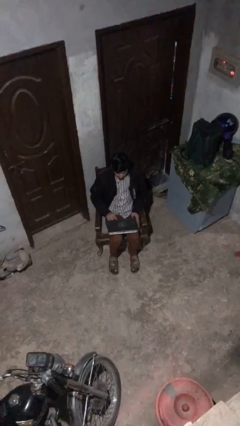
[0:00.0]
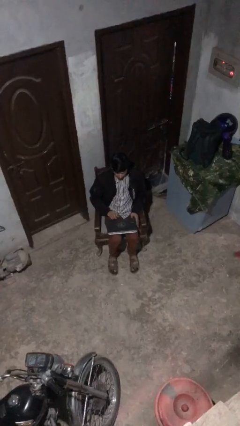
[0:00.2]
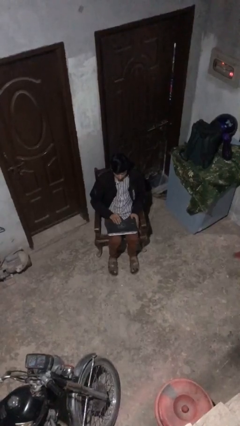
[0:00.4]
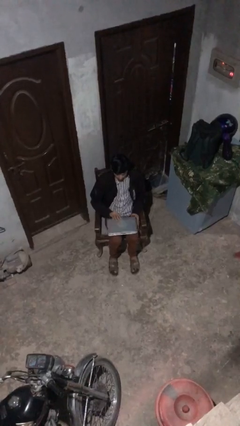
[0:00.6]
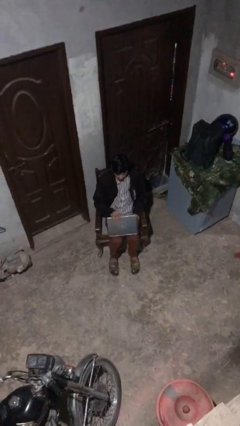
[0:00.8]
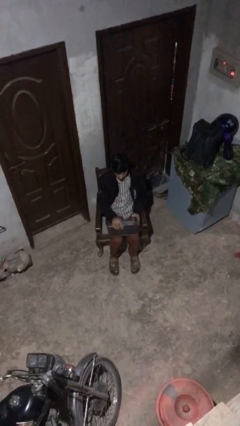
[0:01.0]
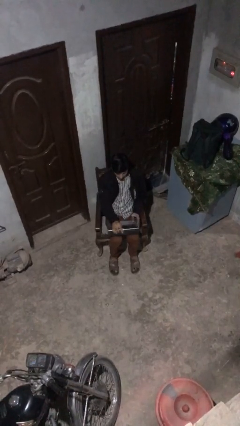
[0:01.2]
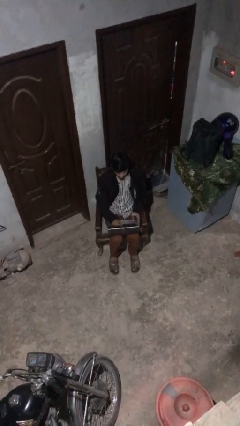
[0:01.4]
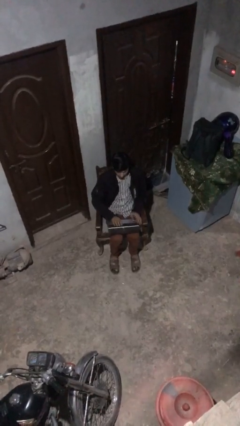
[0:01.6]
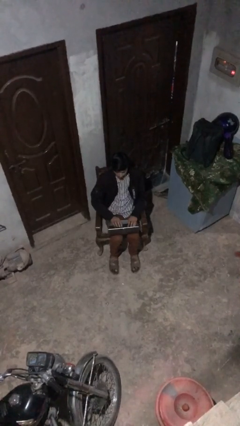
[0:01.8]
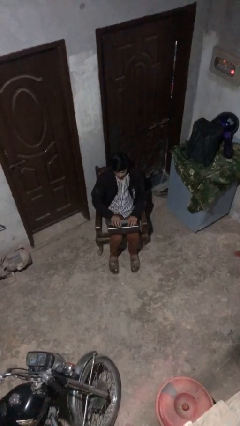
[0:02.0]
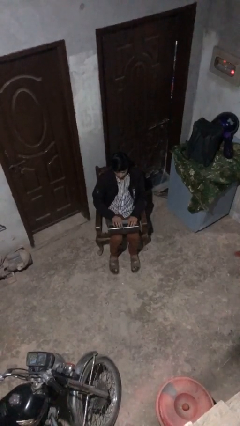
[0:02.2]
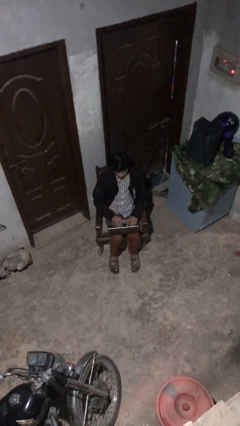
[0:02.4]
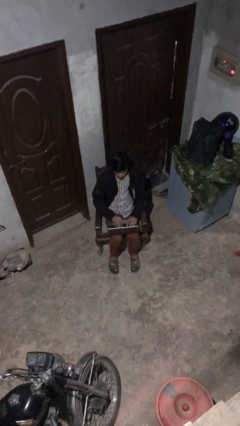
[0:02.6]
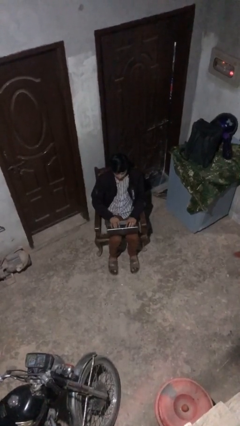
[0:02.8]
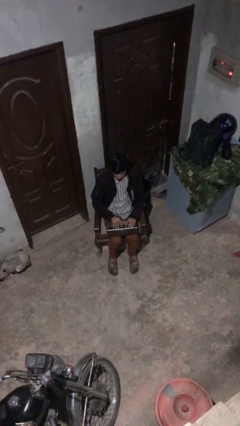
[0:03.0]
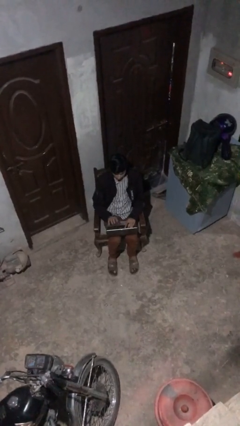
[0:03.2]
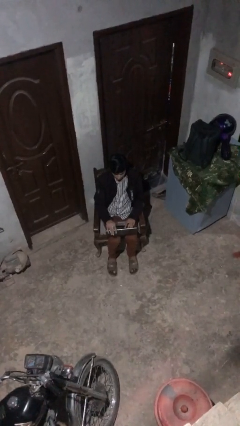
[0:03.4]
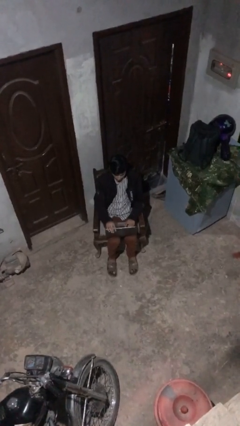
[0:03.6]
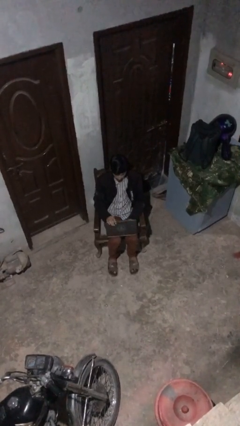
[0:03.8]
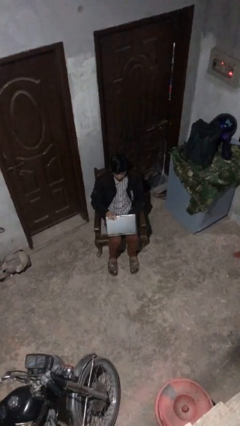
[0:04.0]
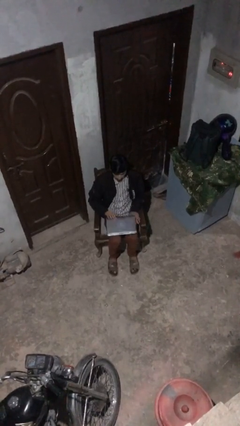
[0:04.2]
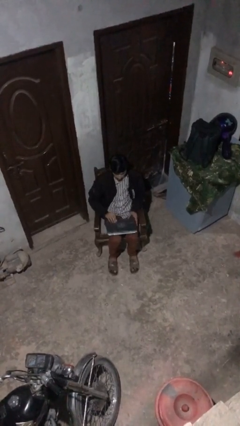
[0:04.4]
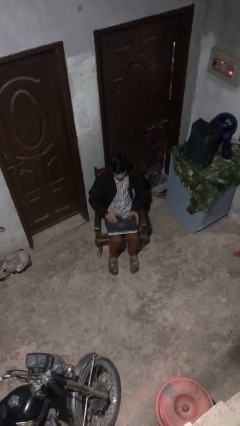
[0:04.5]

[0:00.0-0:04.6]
person interacts with laptop

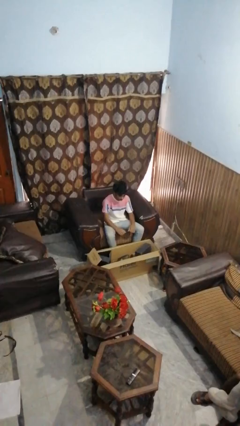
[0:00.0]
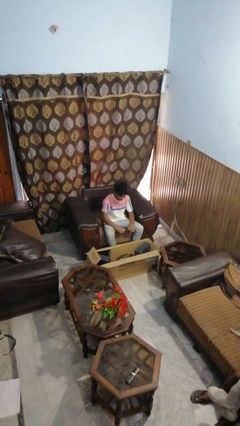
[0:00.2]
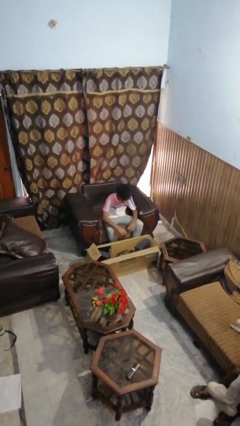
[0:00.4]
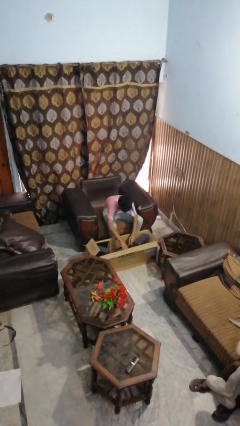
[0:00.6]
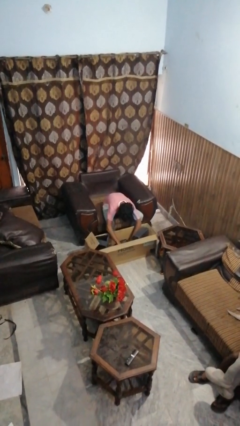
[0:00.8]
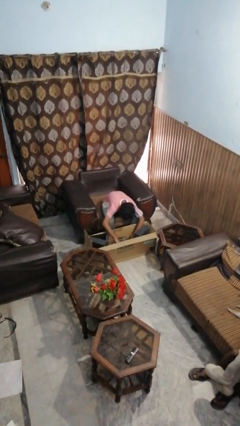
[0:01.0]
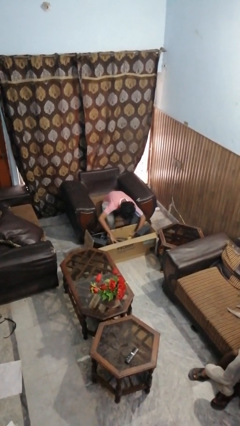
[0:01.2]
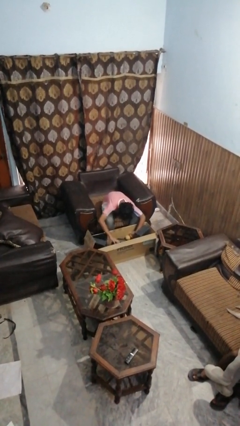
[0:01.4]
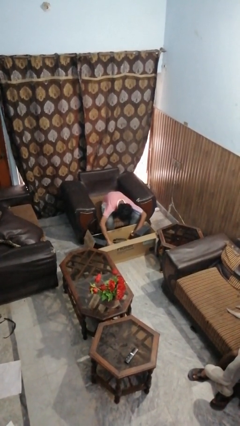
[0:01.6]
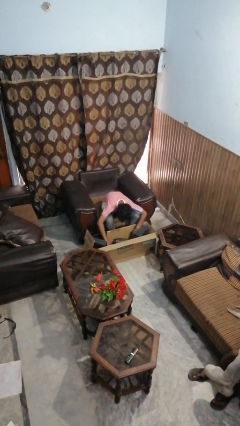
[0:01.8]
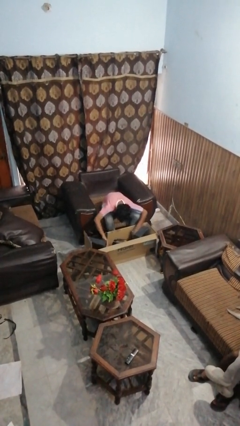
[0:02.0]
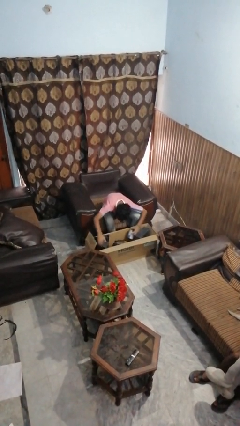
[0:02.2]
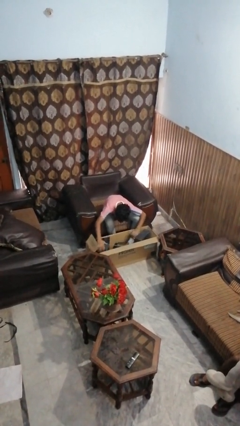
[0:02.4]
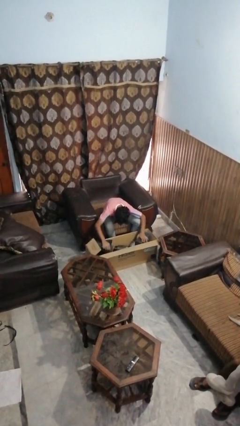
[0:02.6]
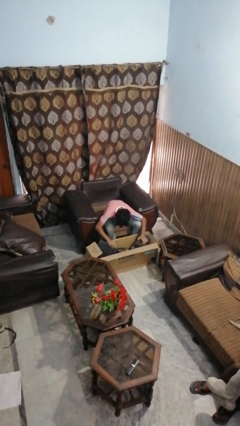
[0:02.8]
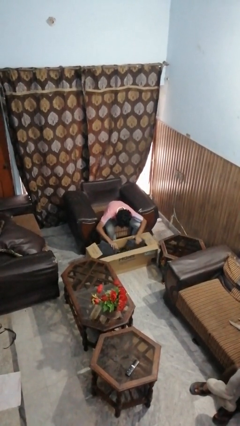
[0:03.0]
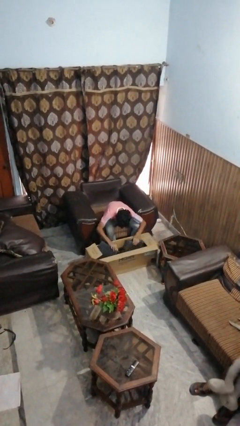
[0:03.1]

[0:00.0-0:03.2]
person searches in box

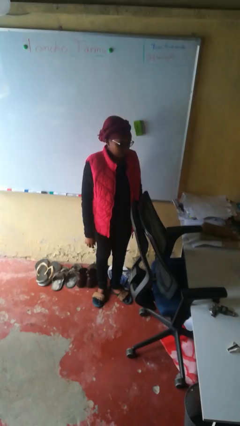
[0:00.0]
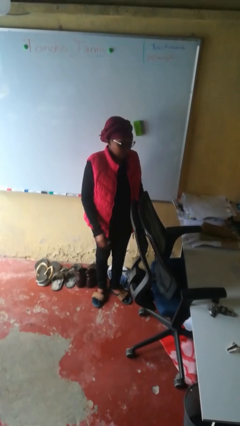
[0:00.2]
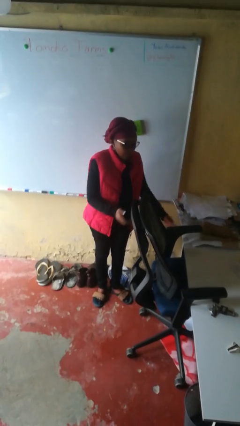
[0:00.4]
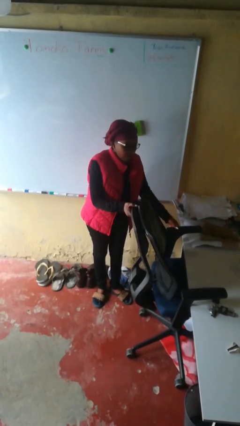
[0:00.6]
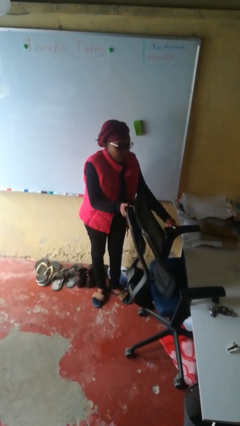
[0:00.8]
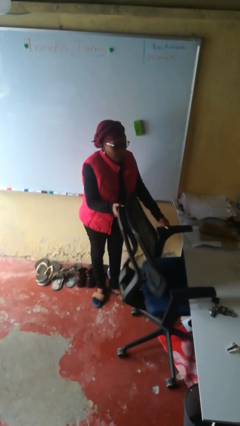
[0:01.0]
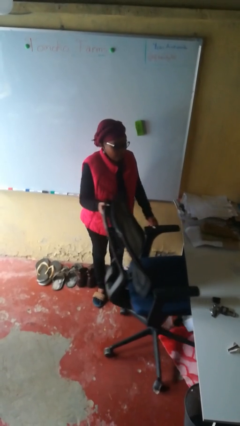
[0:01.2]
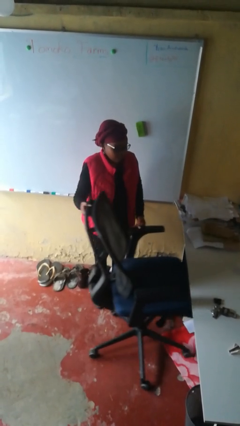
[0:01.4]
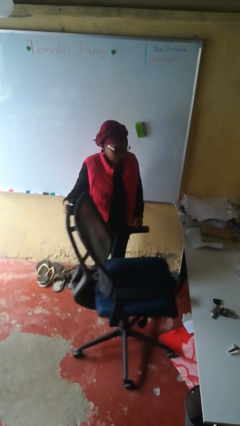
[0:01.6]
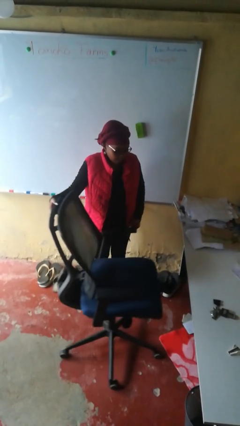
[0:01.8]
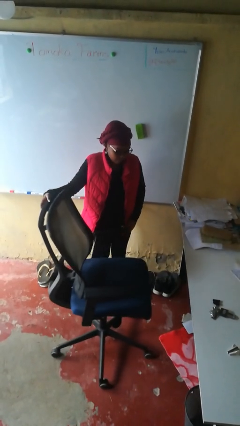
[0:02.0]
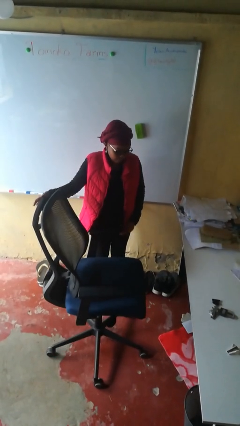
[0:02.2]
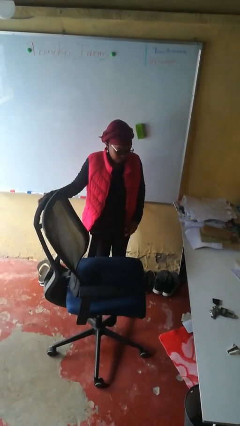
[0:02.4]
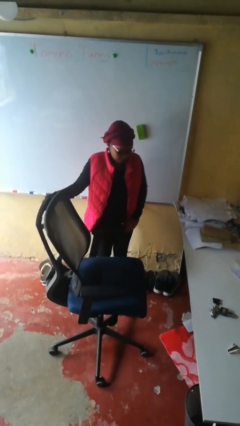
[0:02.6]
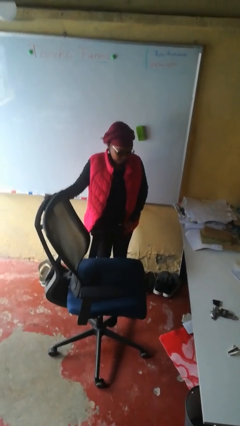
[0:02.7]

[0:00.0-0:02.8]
person pulls out chair

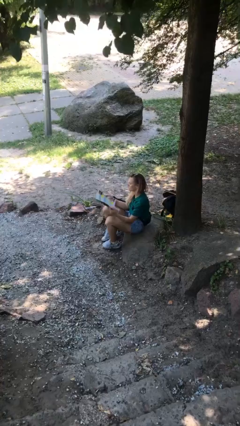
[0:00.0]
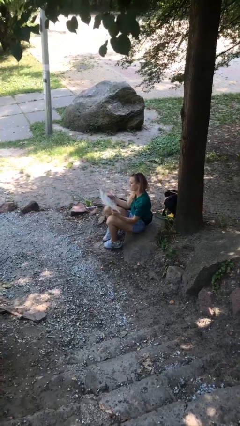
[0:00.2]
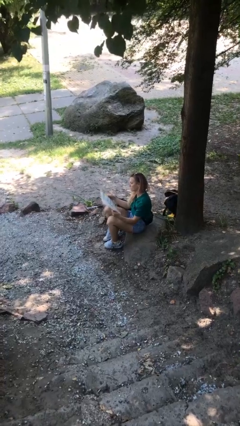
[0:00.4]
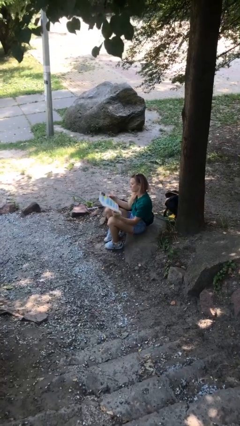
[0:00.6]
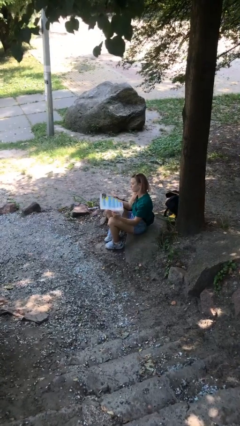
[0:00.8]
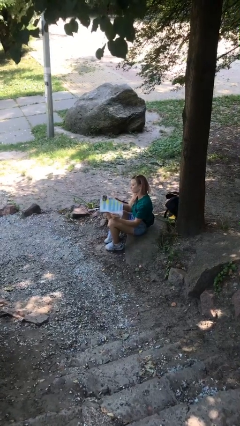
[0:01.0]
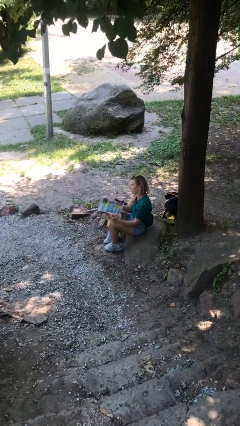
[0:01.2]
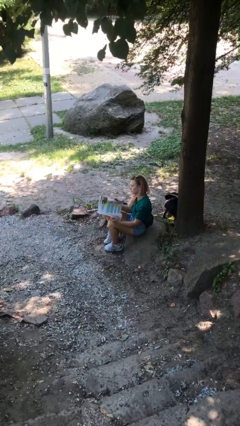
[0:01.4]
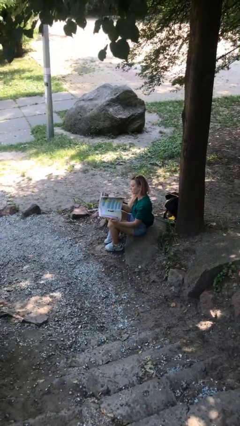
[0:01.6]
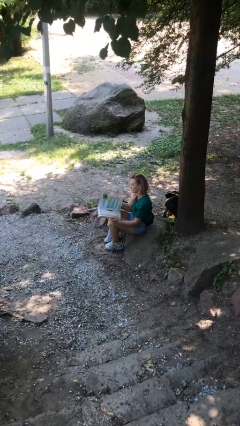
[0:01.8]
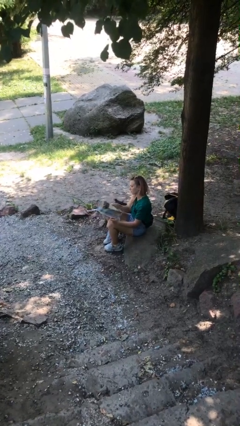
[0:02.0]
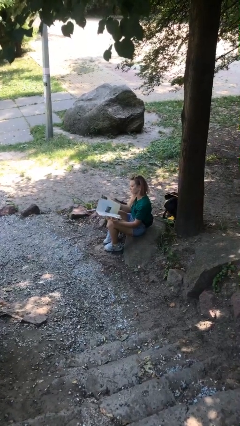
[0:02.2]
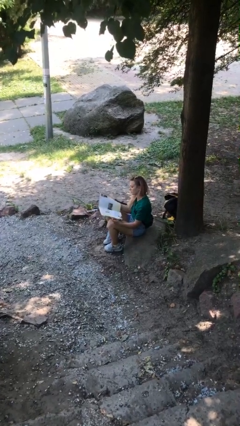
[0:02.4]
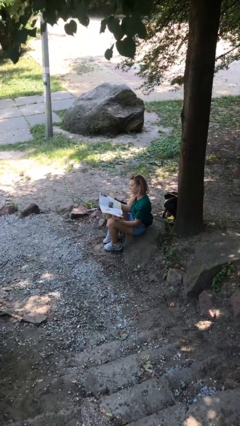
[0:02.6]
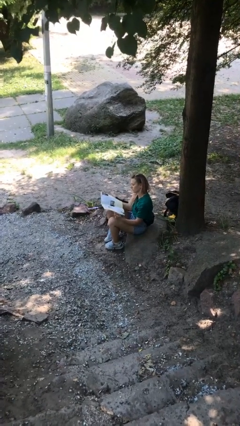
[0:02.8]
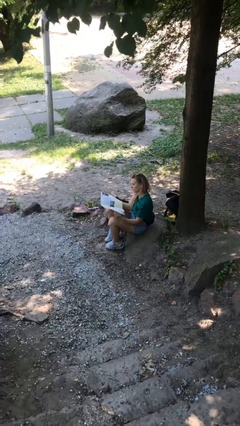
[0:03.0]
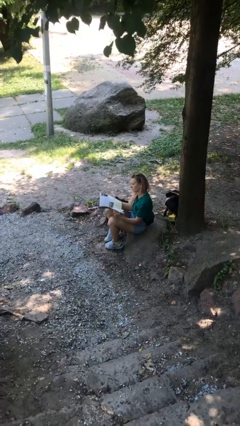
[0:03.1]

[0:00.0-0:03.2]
person reads magazine

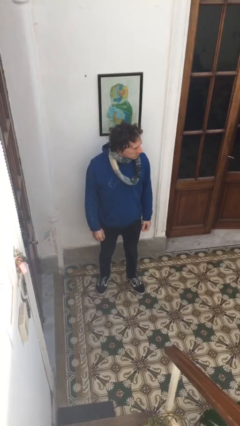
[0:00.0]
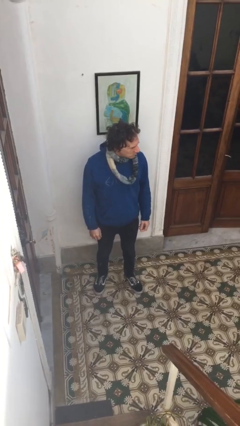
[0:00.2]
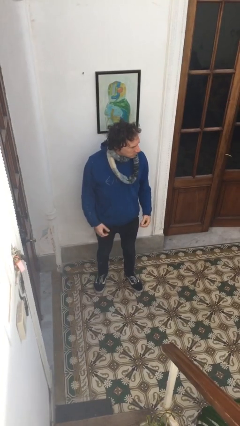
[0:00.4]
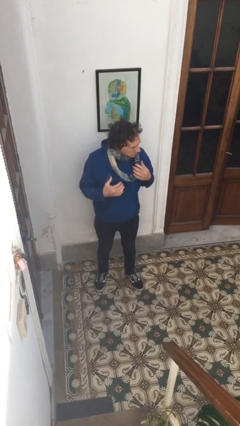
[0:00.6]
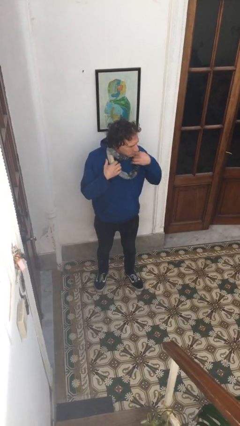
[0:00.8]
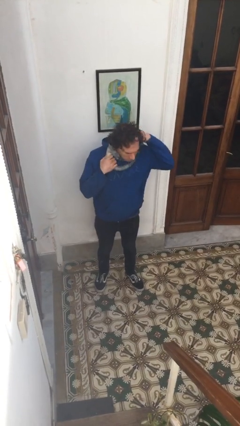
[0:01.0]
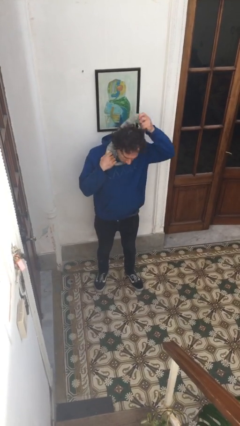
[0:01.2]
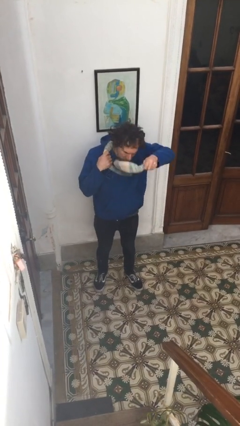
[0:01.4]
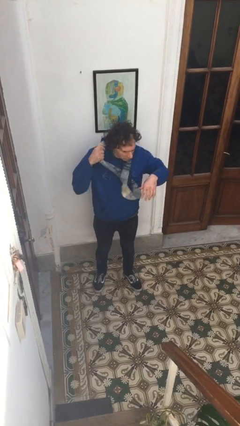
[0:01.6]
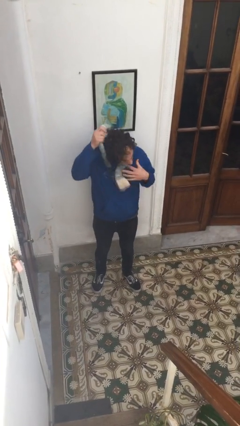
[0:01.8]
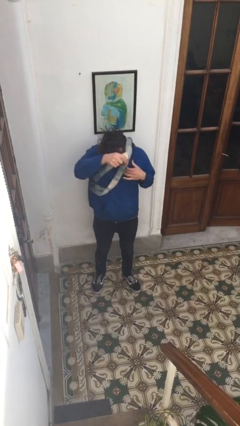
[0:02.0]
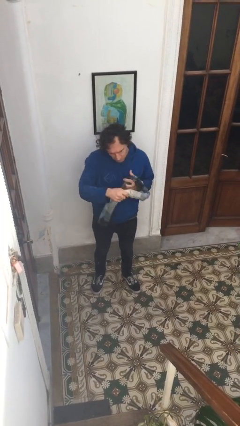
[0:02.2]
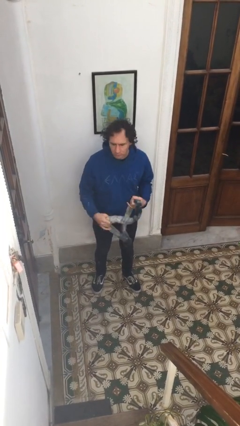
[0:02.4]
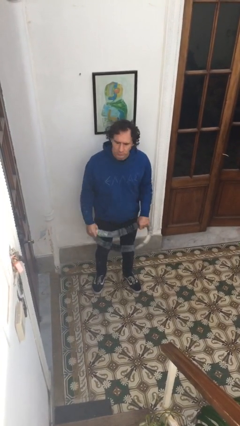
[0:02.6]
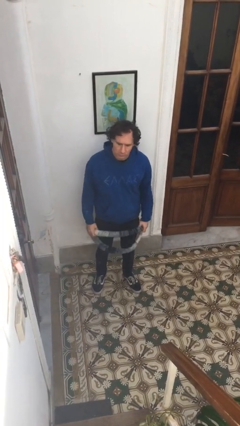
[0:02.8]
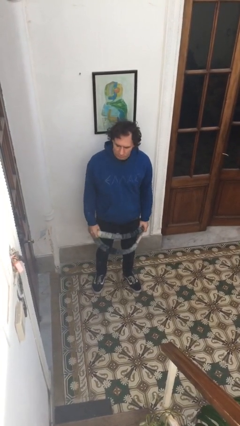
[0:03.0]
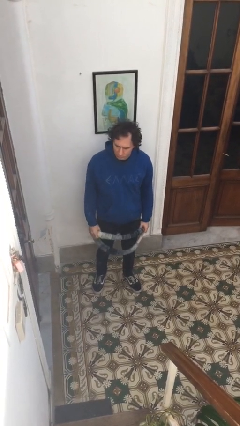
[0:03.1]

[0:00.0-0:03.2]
person takes off scarf

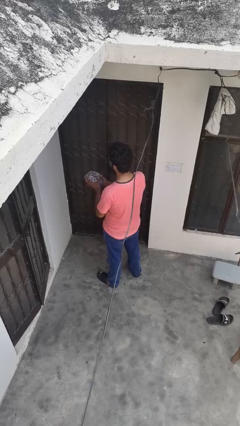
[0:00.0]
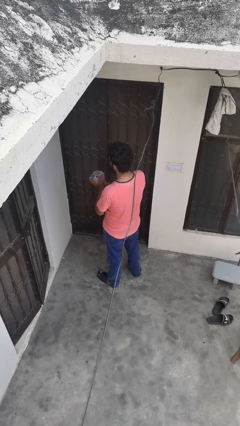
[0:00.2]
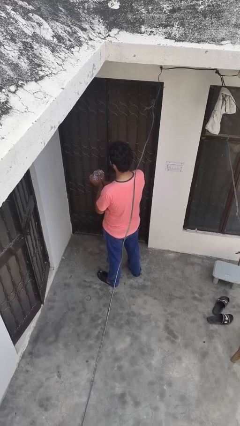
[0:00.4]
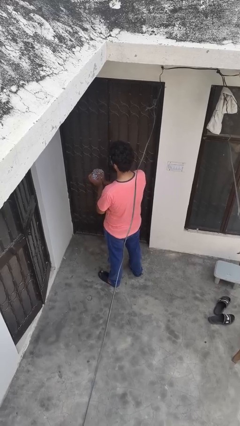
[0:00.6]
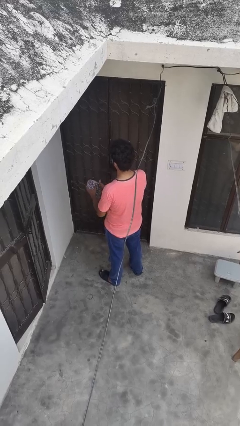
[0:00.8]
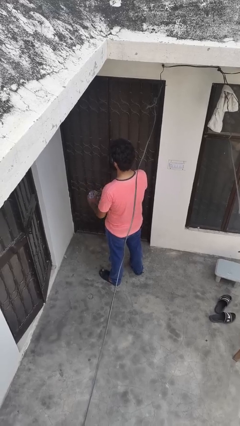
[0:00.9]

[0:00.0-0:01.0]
person squeezes object
